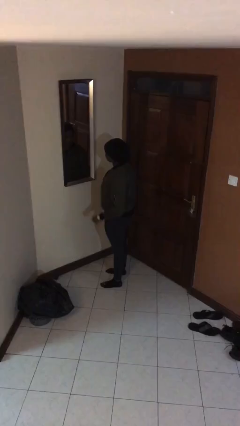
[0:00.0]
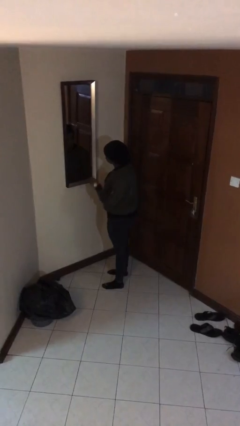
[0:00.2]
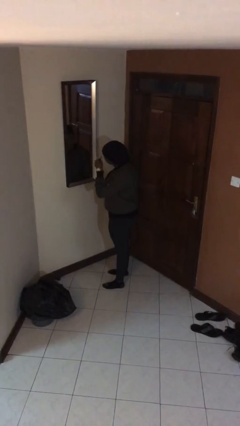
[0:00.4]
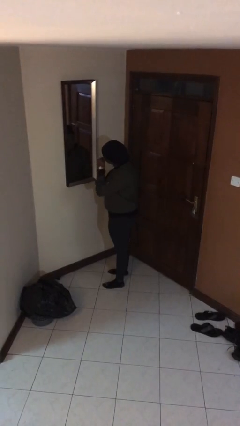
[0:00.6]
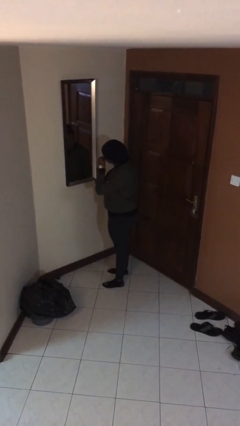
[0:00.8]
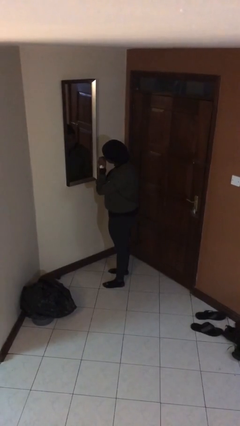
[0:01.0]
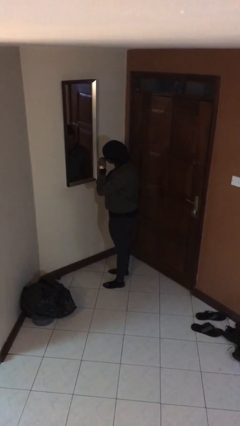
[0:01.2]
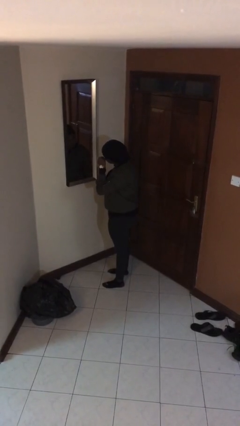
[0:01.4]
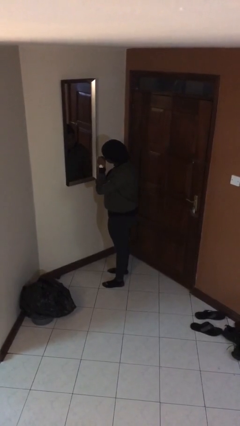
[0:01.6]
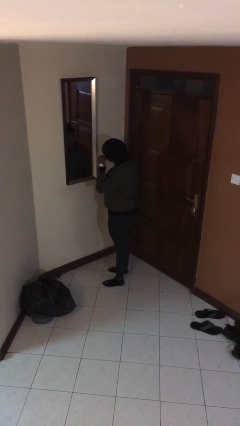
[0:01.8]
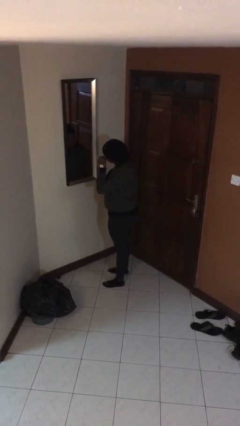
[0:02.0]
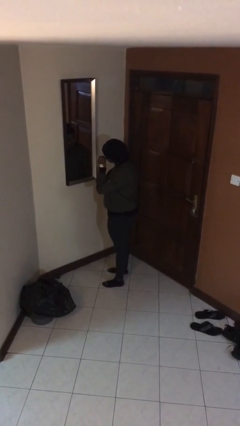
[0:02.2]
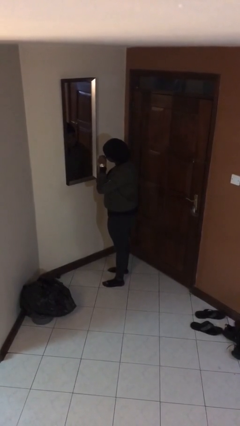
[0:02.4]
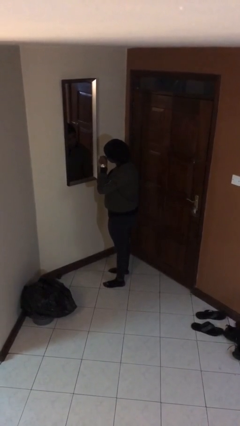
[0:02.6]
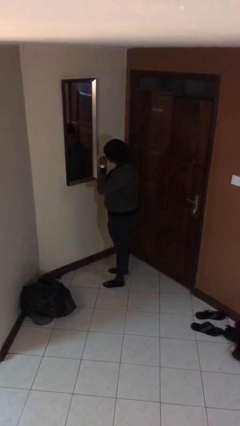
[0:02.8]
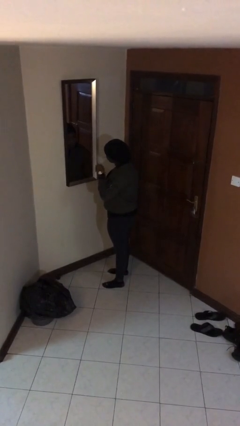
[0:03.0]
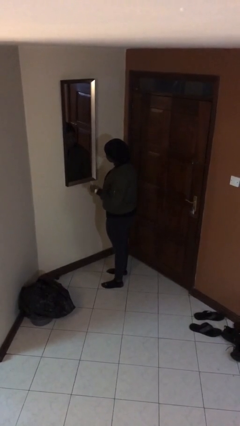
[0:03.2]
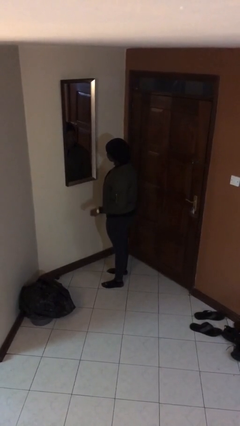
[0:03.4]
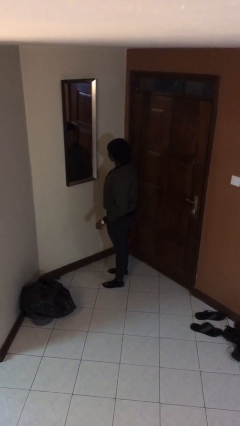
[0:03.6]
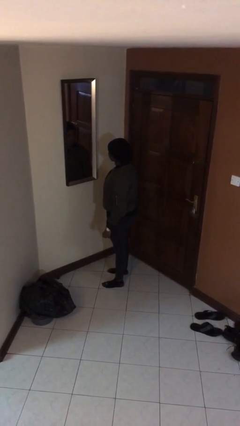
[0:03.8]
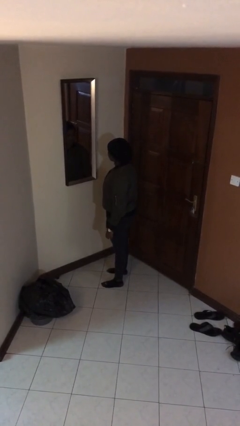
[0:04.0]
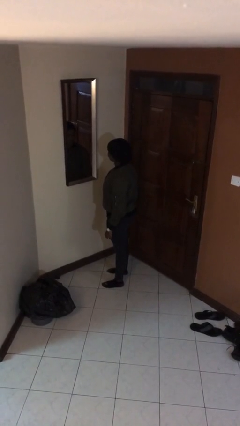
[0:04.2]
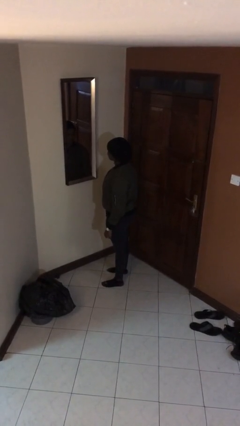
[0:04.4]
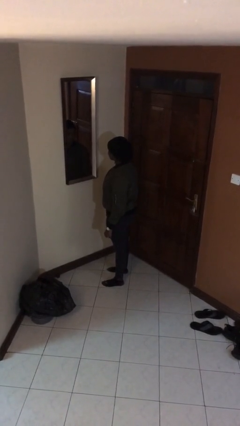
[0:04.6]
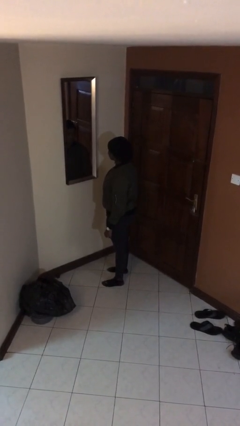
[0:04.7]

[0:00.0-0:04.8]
person applies eye makeup

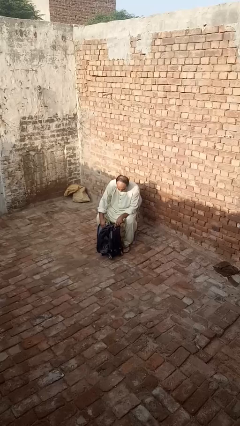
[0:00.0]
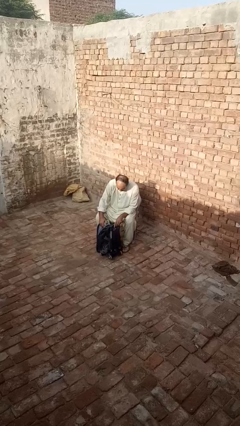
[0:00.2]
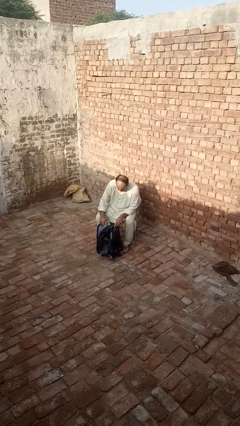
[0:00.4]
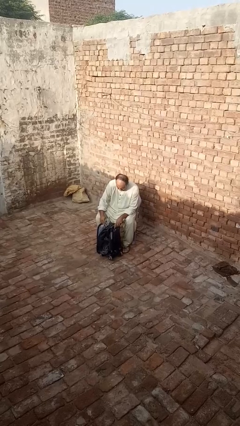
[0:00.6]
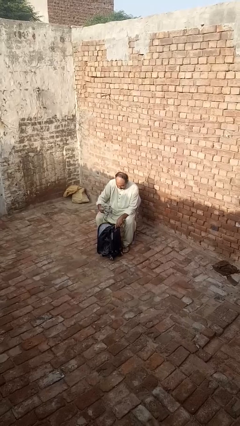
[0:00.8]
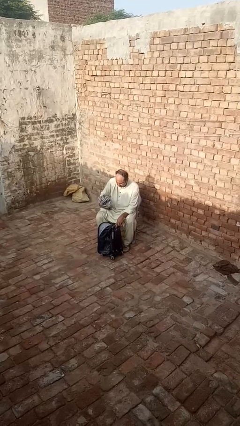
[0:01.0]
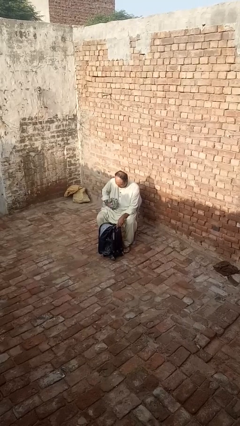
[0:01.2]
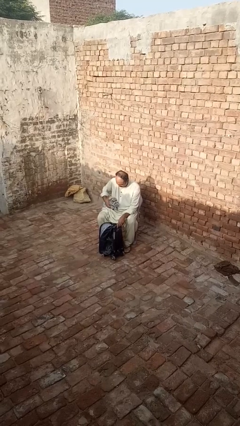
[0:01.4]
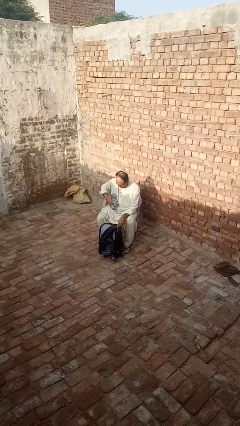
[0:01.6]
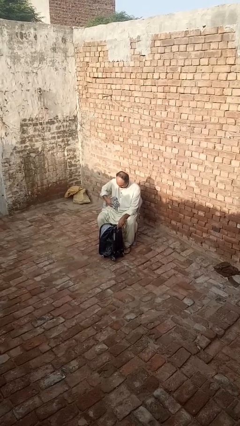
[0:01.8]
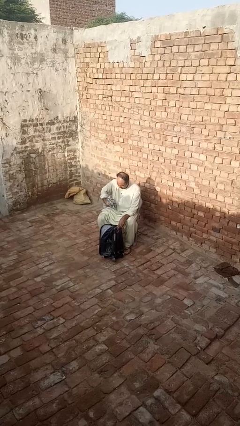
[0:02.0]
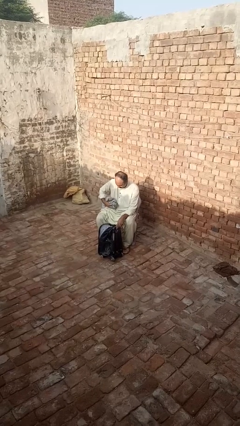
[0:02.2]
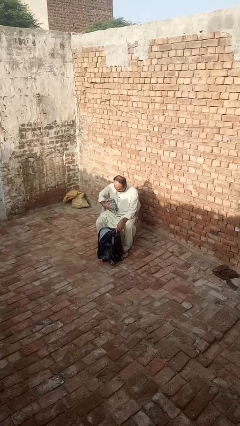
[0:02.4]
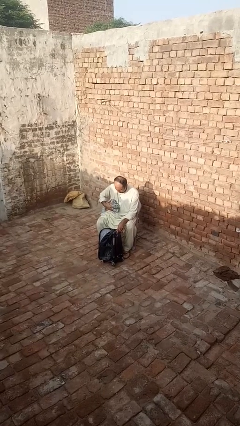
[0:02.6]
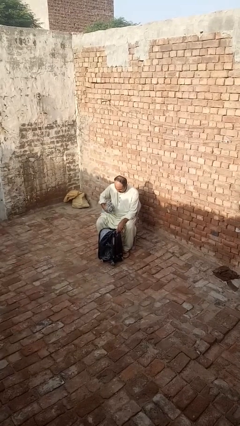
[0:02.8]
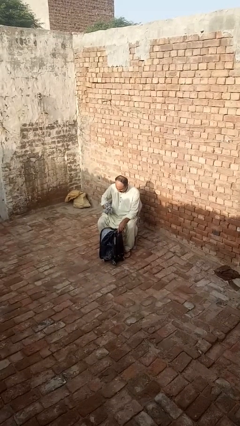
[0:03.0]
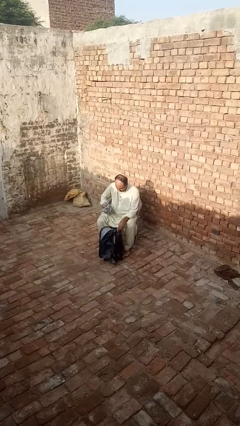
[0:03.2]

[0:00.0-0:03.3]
person takes object from backpack

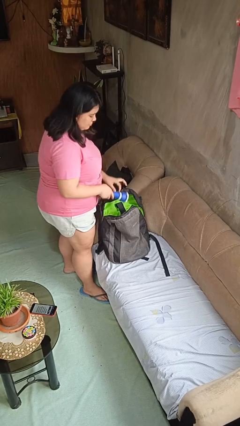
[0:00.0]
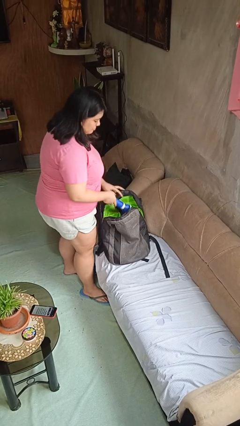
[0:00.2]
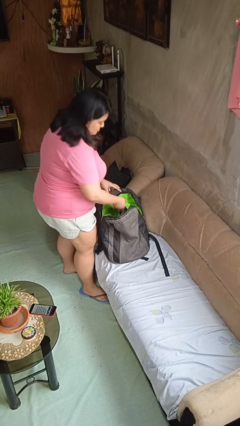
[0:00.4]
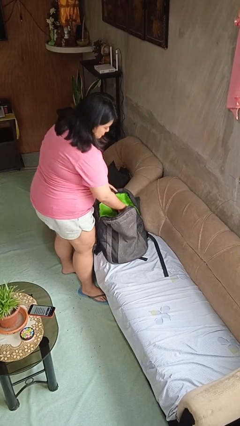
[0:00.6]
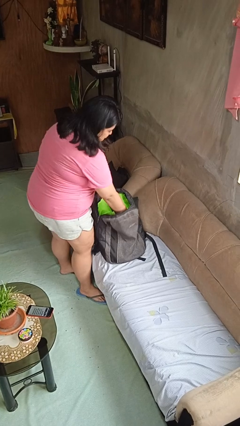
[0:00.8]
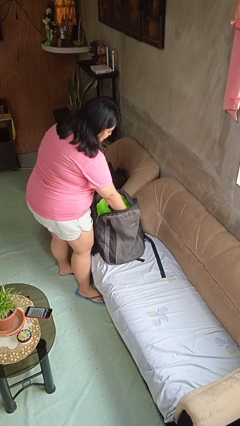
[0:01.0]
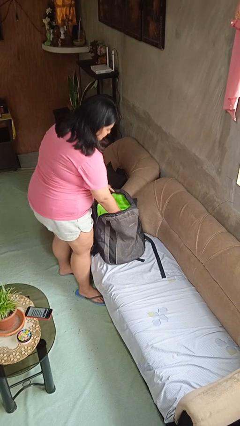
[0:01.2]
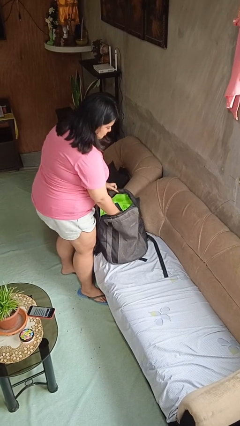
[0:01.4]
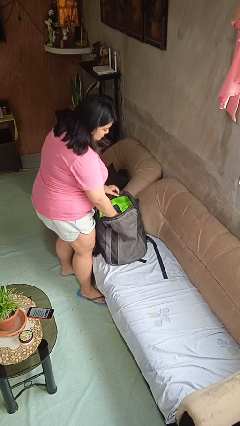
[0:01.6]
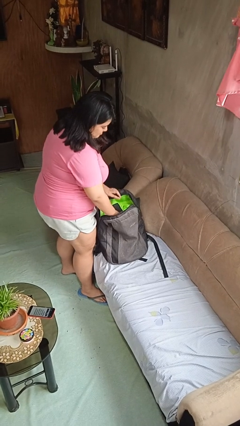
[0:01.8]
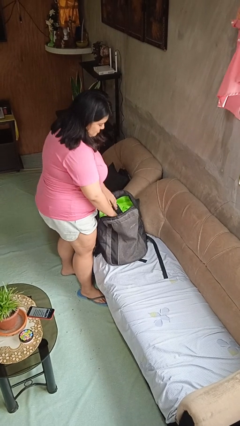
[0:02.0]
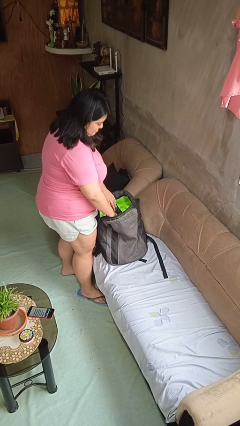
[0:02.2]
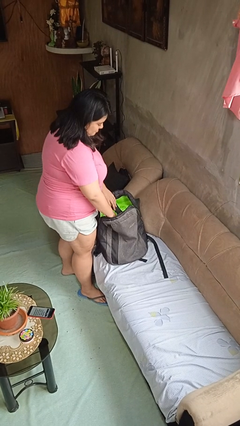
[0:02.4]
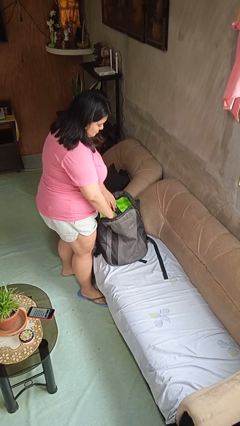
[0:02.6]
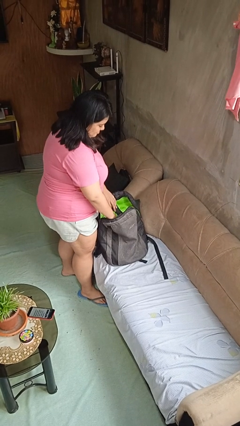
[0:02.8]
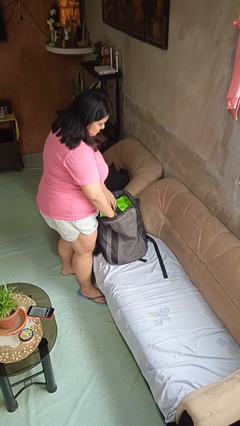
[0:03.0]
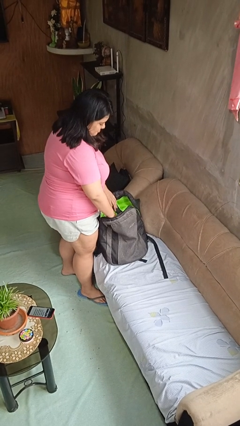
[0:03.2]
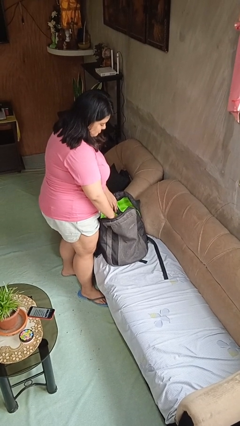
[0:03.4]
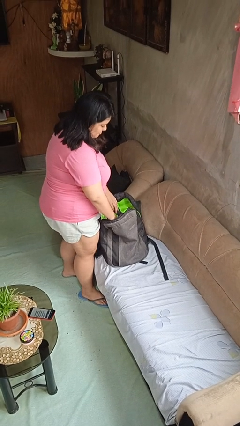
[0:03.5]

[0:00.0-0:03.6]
person puts object into backpack

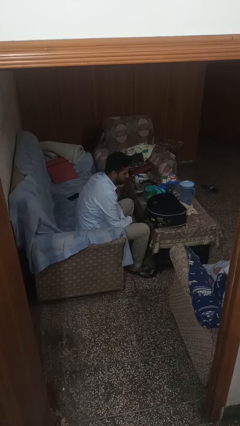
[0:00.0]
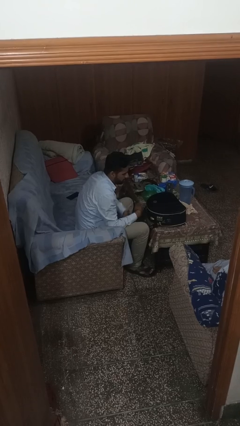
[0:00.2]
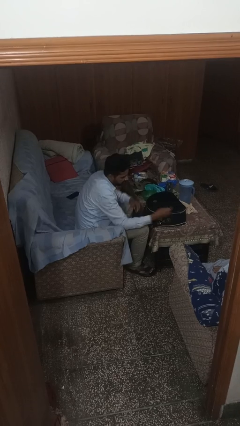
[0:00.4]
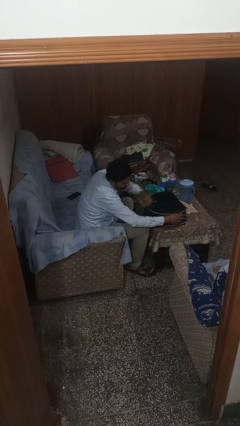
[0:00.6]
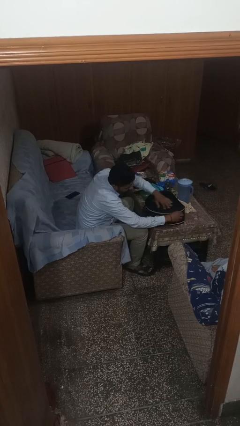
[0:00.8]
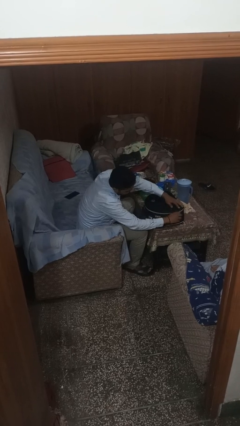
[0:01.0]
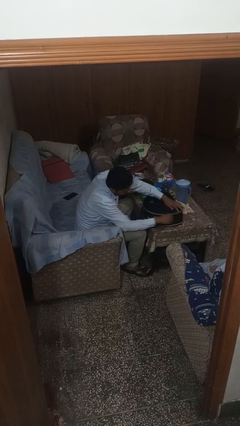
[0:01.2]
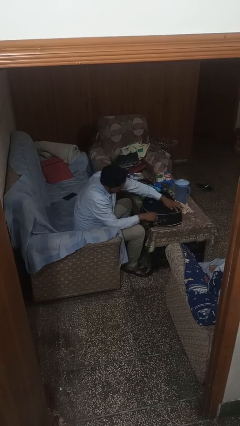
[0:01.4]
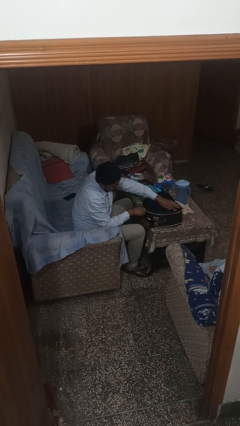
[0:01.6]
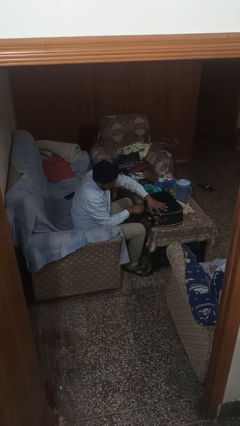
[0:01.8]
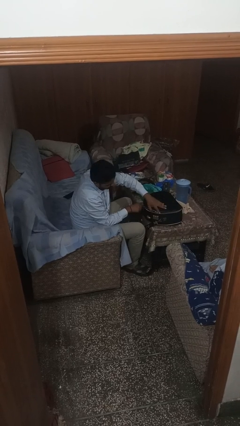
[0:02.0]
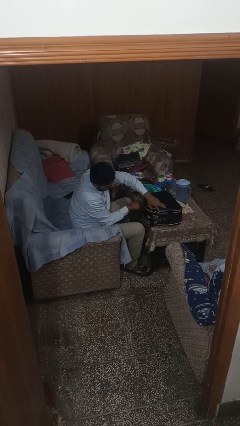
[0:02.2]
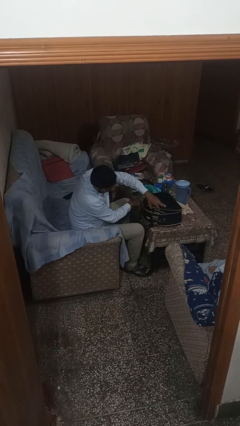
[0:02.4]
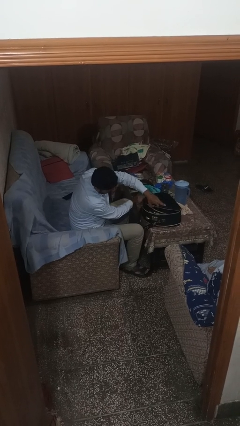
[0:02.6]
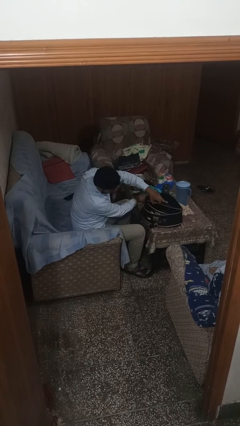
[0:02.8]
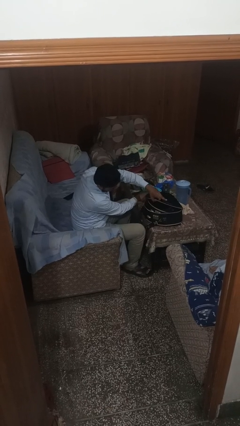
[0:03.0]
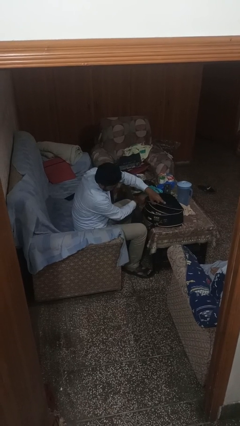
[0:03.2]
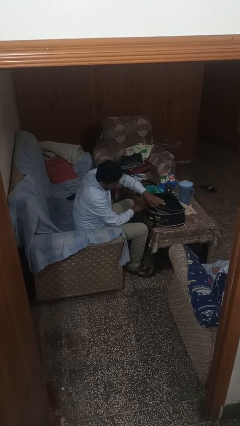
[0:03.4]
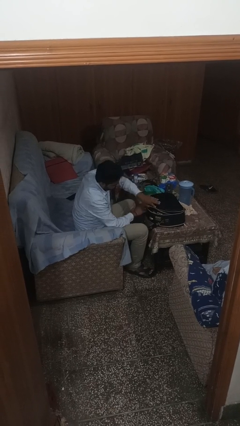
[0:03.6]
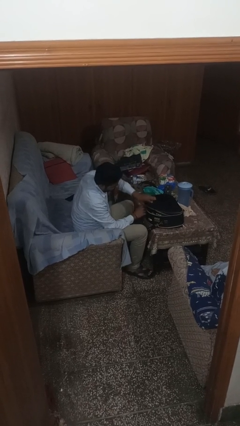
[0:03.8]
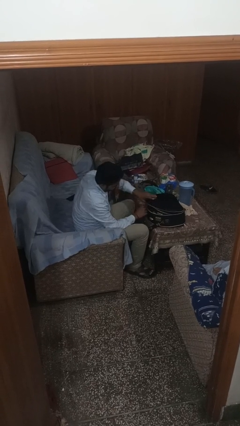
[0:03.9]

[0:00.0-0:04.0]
person opens suitcase

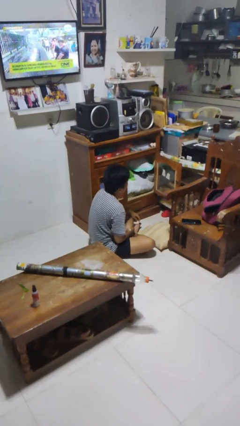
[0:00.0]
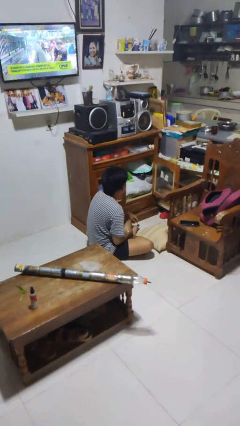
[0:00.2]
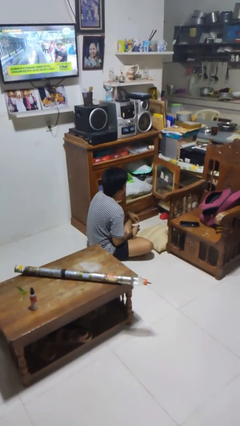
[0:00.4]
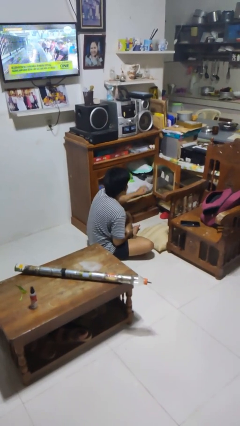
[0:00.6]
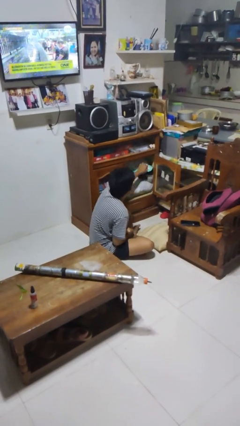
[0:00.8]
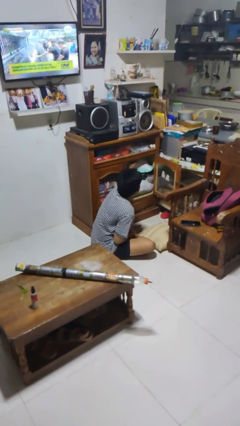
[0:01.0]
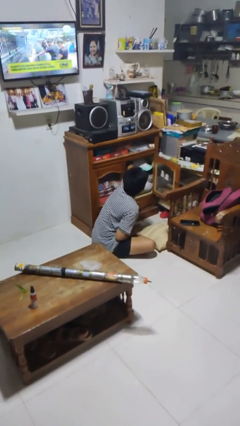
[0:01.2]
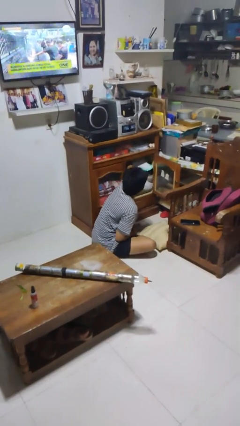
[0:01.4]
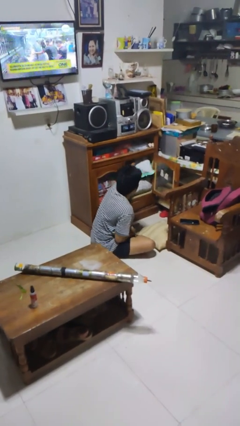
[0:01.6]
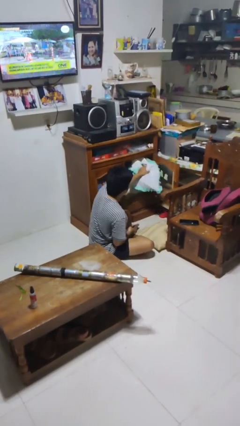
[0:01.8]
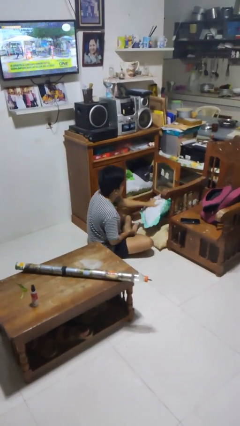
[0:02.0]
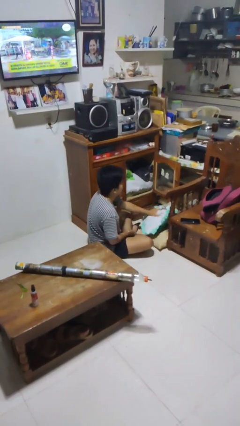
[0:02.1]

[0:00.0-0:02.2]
person puts clothes into dresser

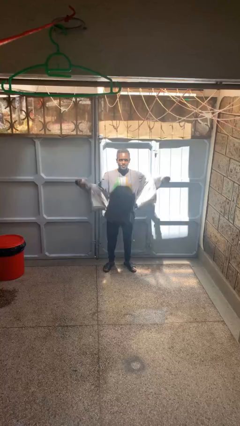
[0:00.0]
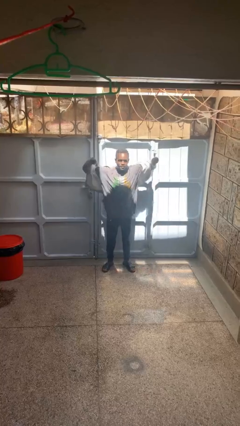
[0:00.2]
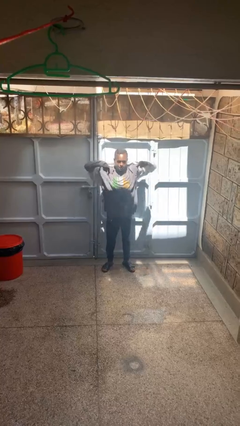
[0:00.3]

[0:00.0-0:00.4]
person puts on hoodie
